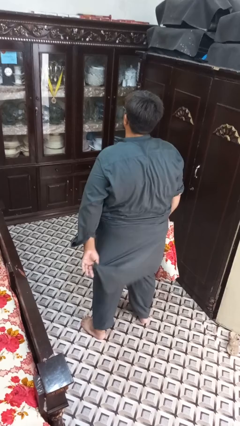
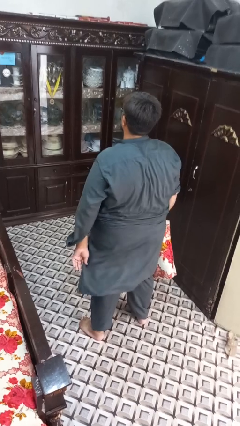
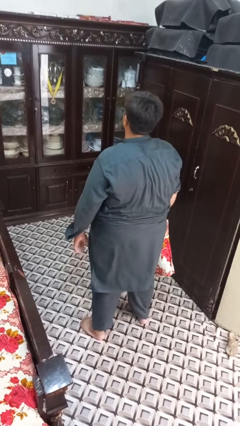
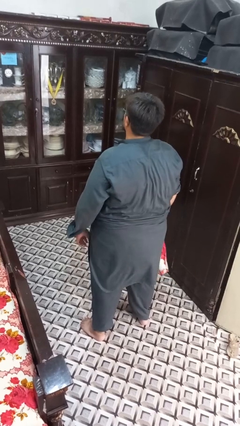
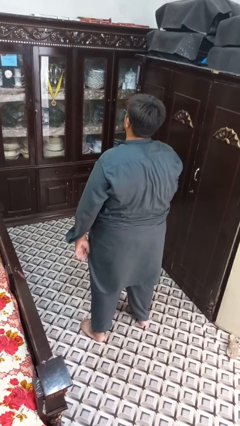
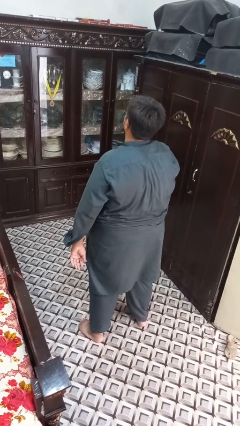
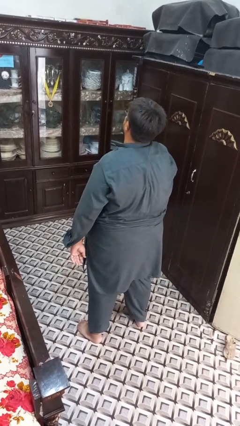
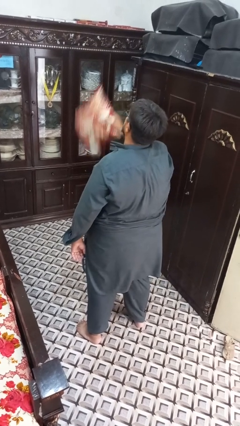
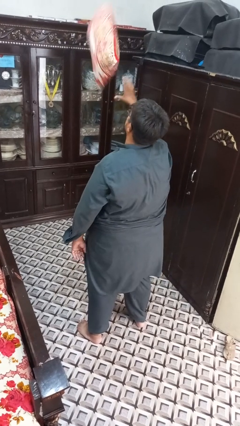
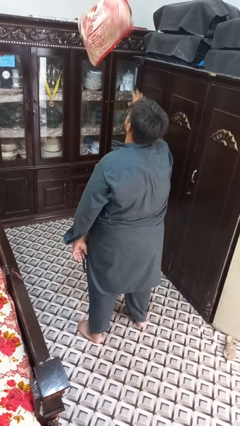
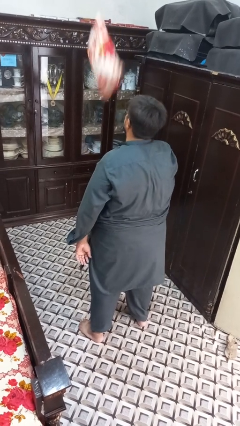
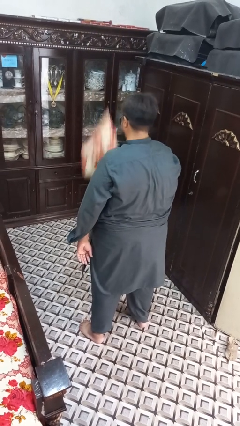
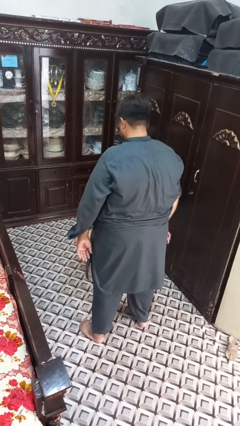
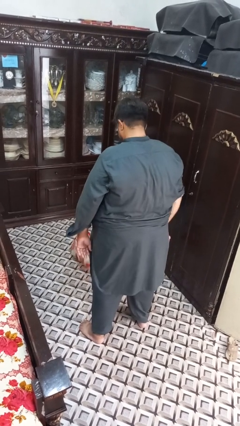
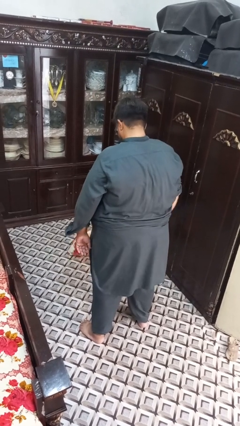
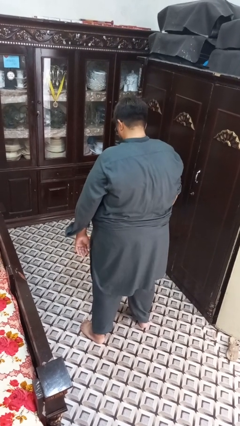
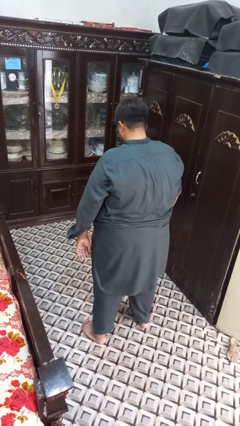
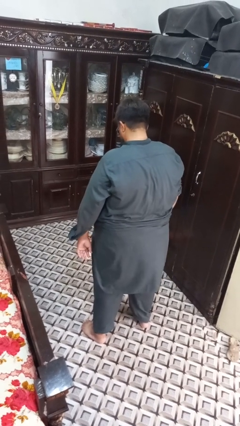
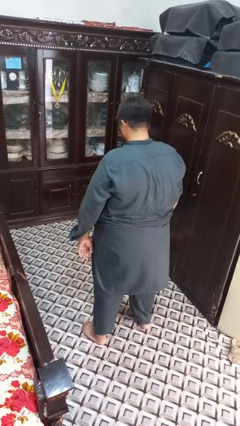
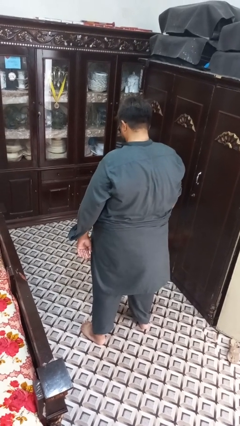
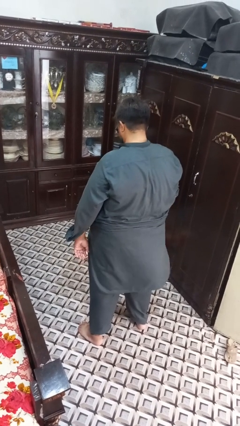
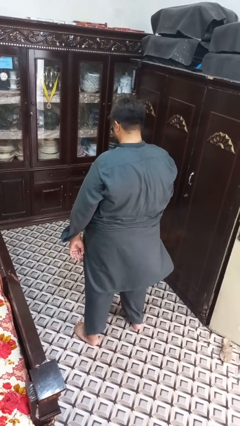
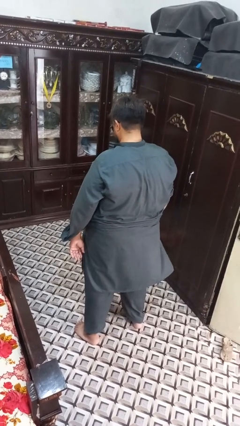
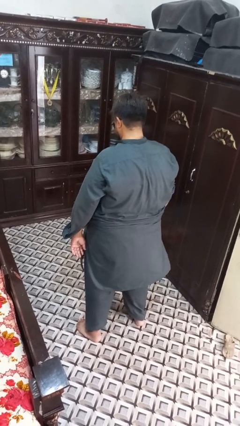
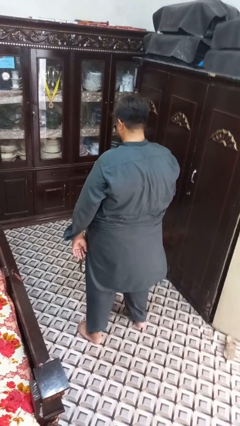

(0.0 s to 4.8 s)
person throws object into air

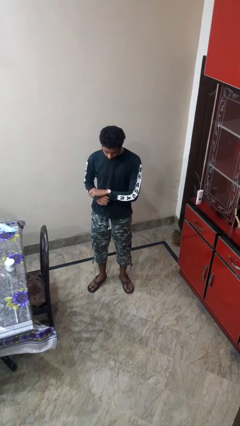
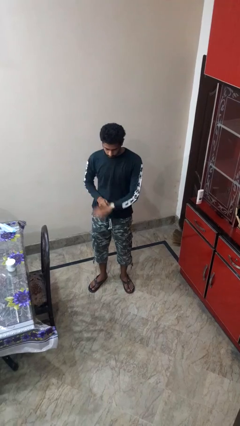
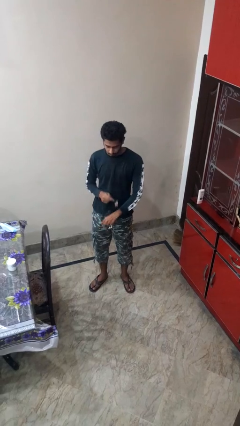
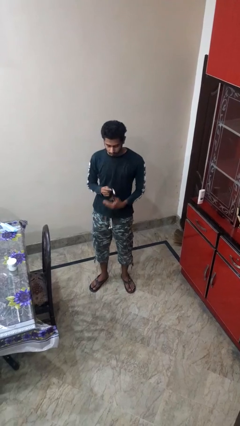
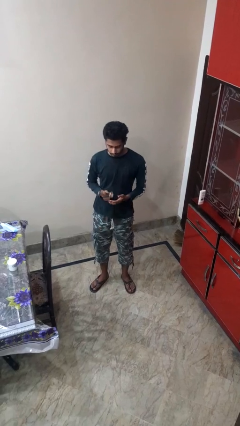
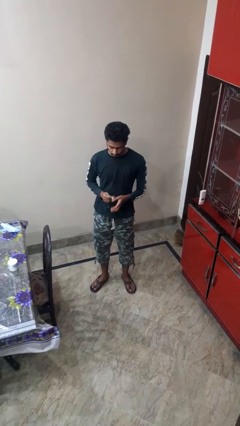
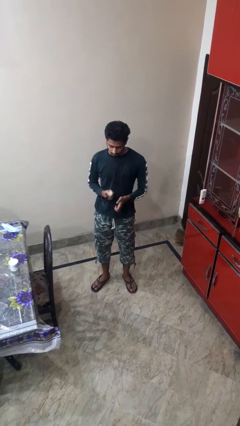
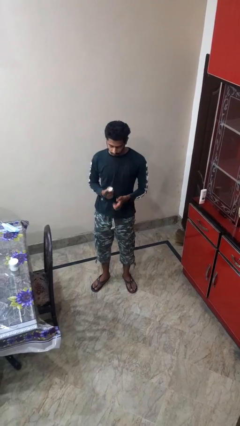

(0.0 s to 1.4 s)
person takes off wristwatch

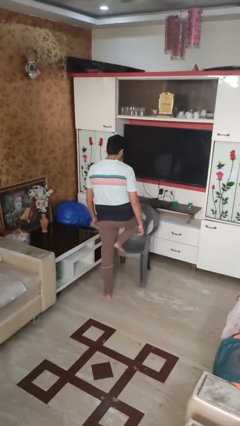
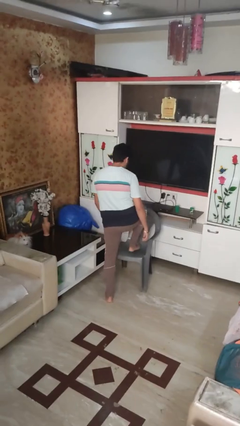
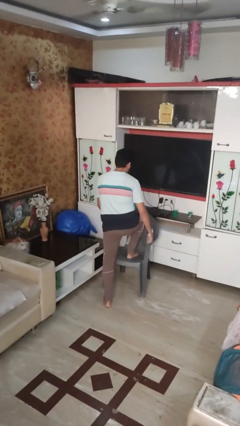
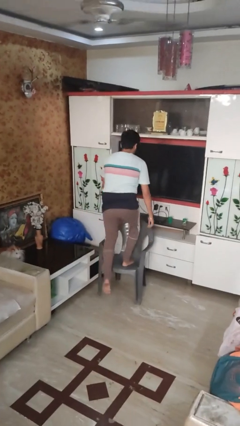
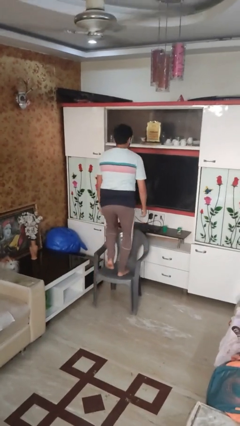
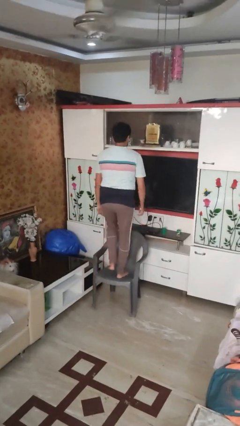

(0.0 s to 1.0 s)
person climbs on chair

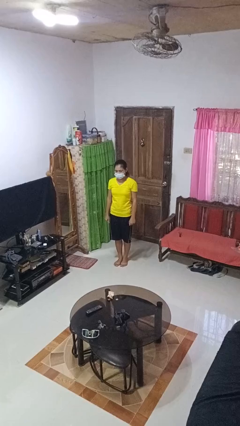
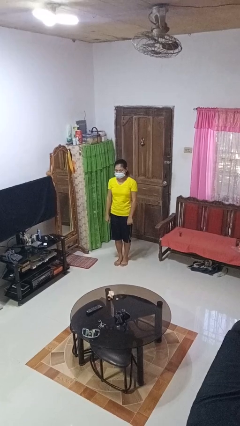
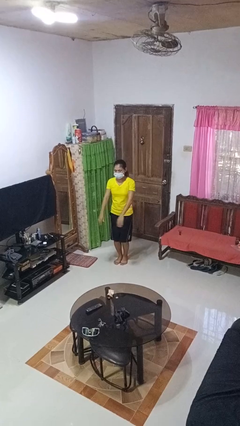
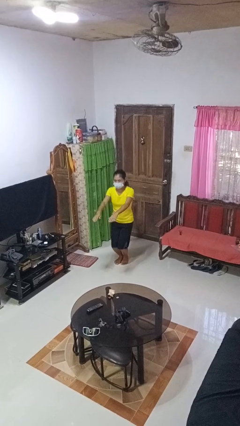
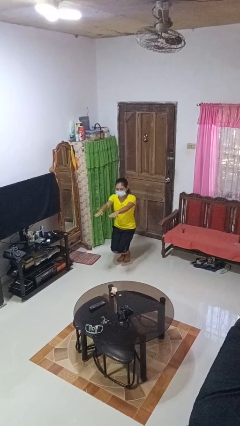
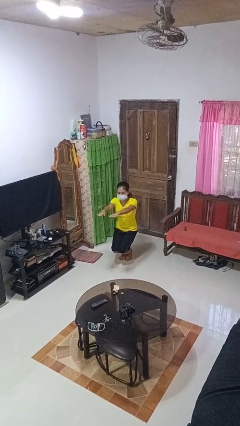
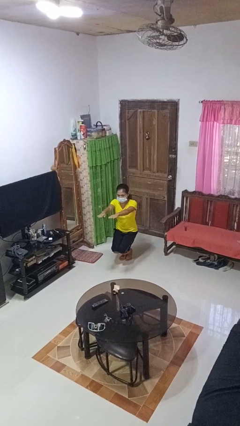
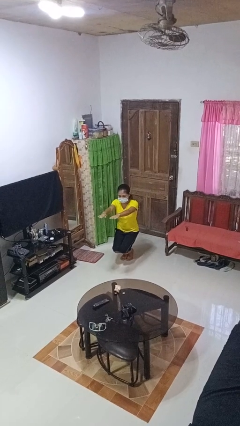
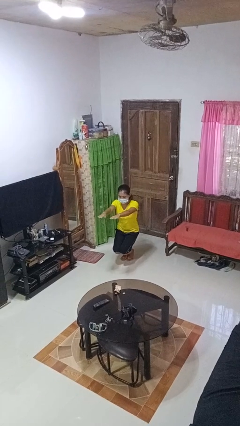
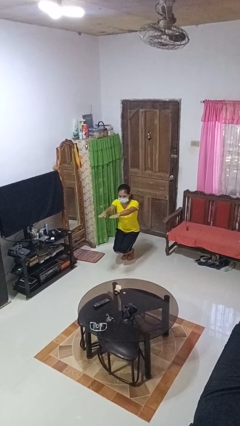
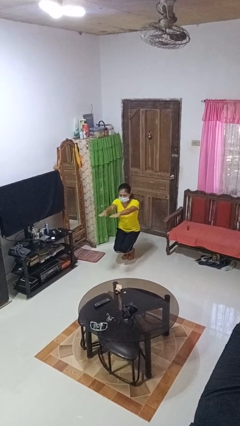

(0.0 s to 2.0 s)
person squats

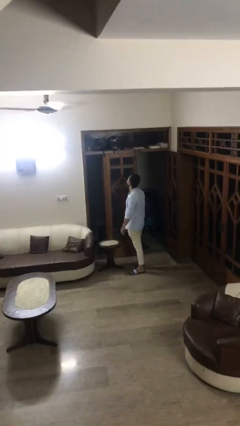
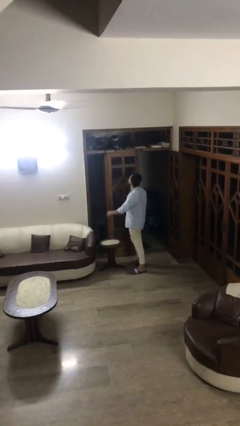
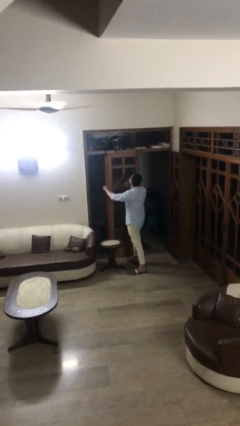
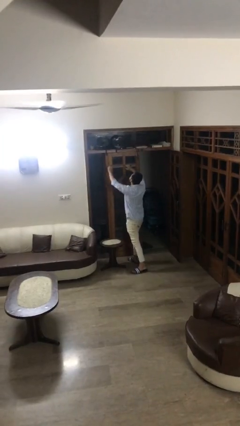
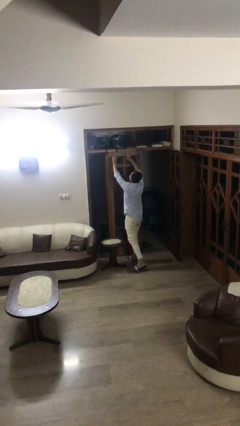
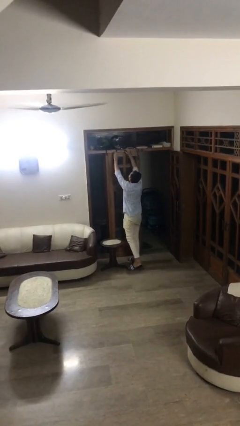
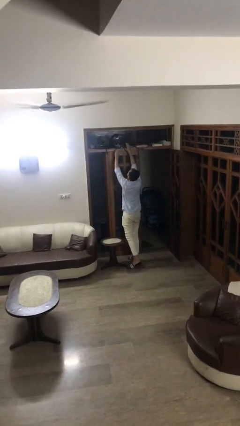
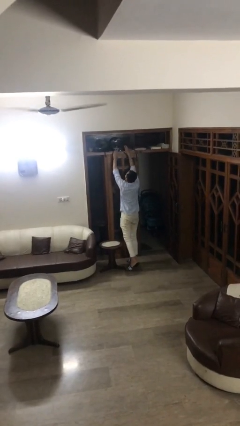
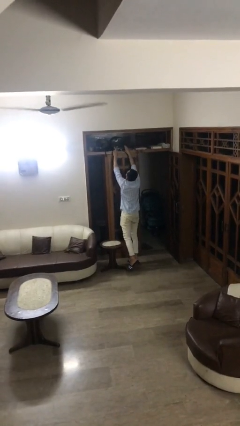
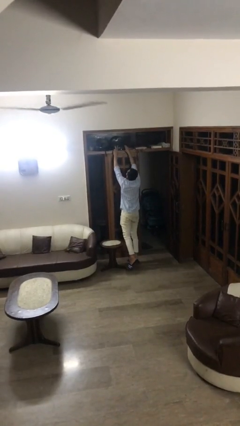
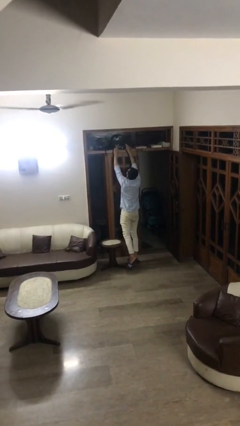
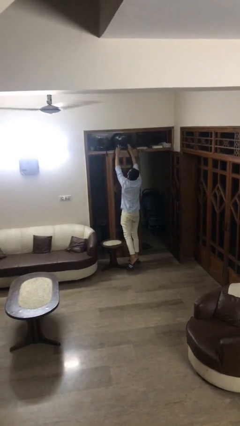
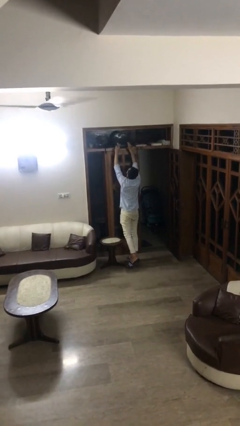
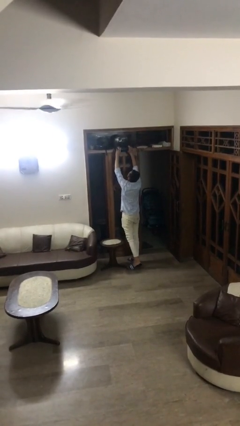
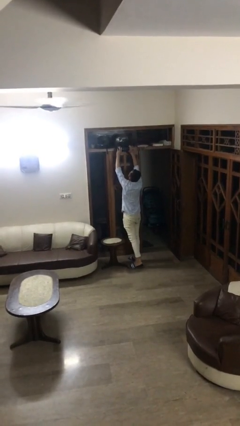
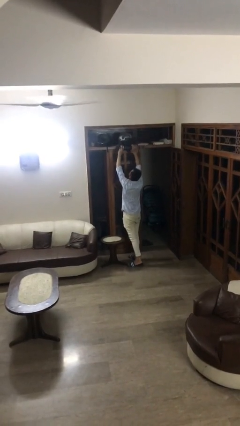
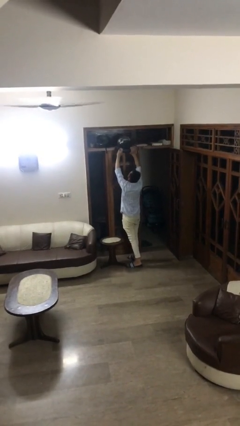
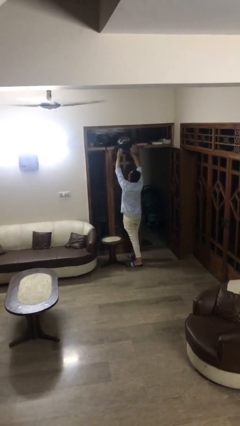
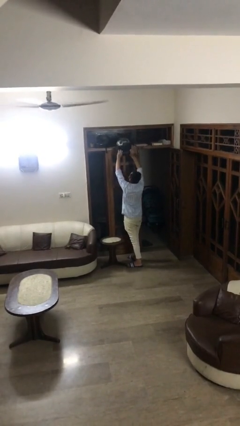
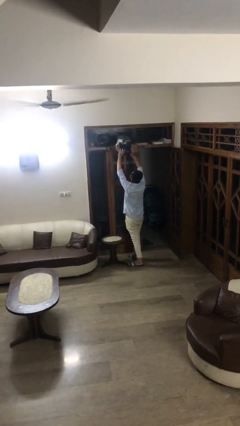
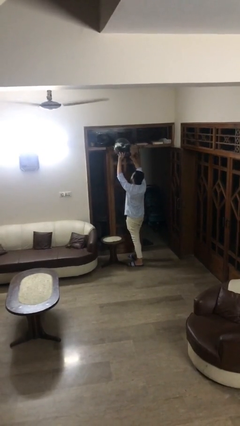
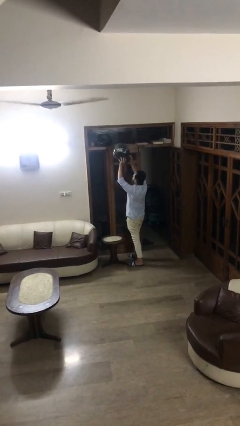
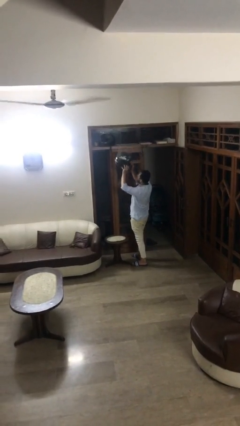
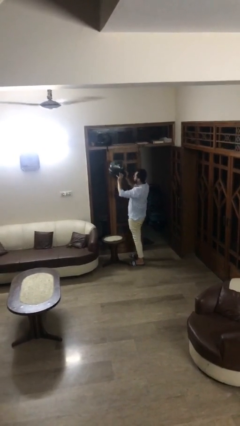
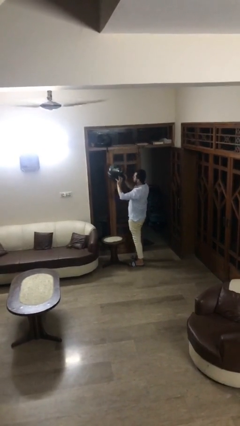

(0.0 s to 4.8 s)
person picks up object from shelf

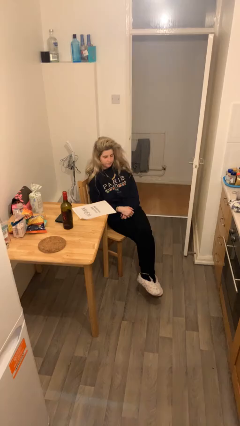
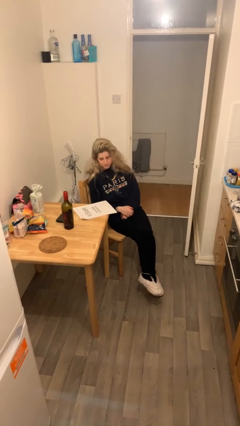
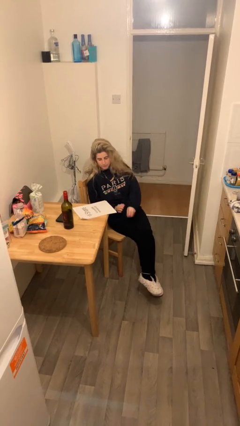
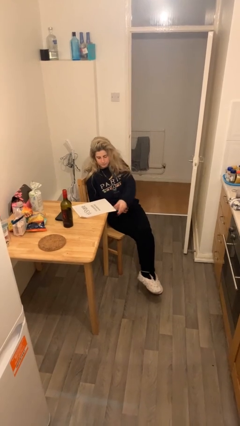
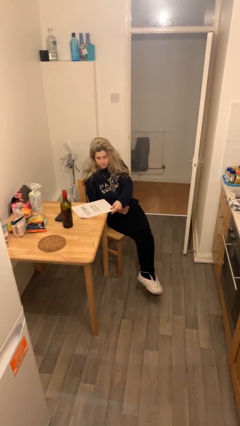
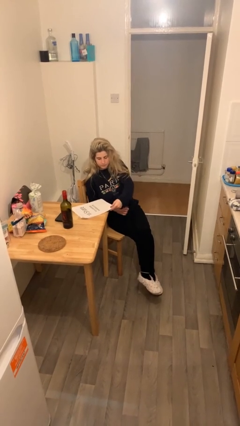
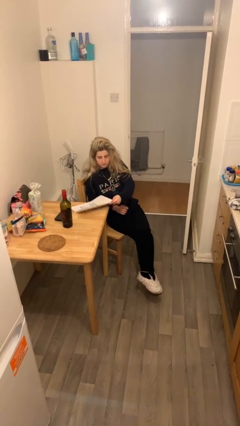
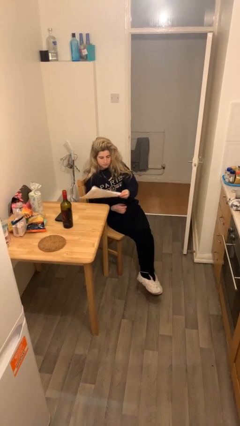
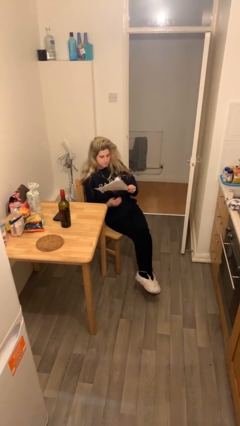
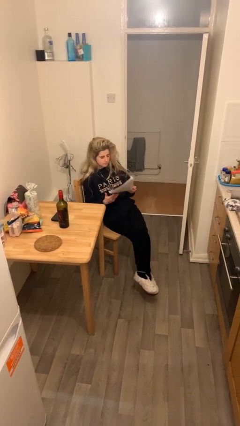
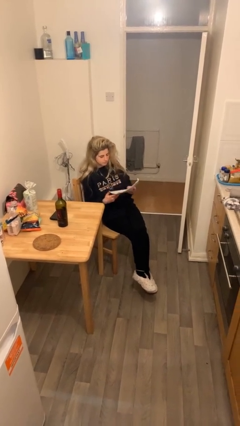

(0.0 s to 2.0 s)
person picks up object from table

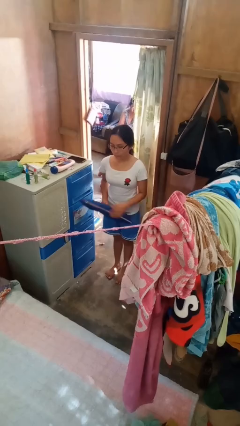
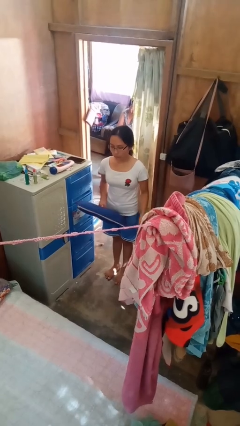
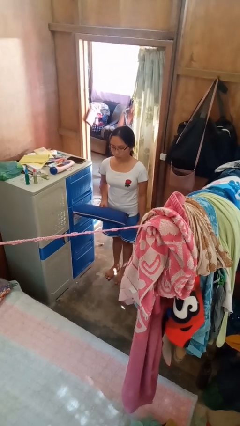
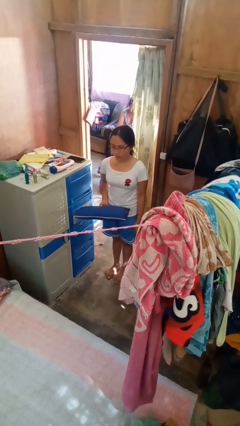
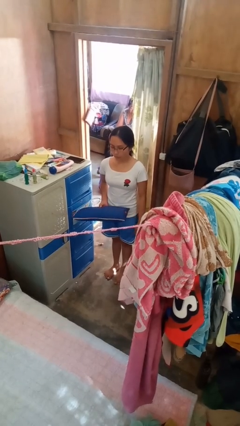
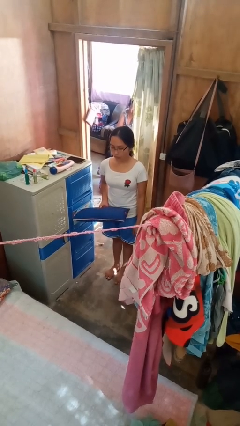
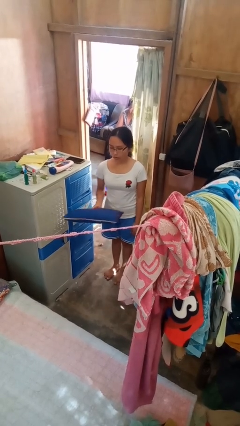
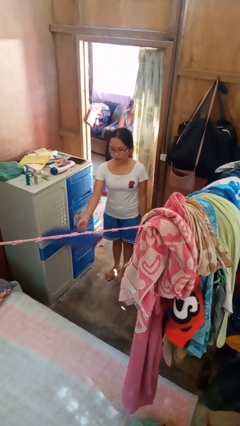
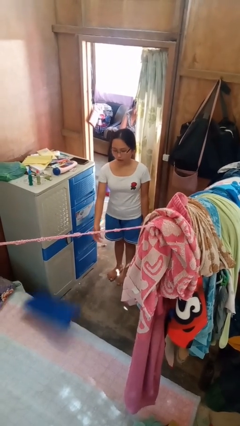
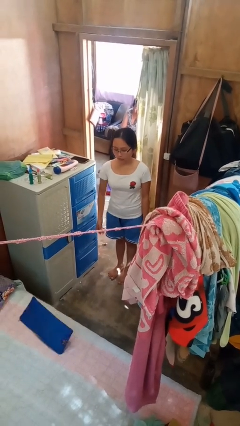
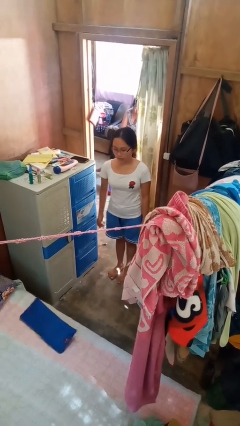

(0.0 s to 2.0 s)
person throws object on bed
